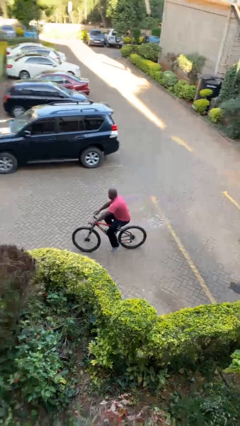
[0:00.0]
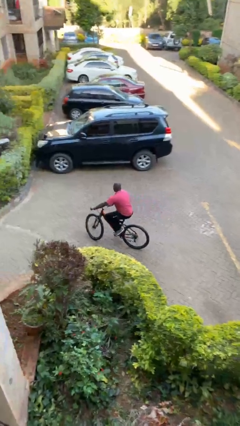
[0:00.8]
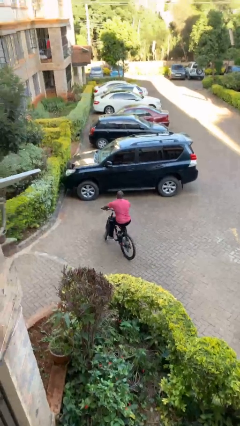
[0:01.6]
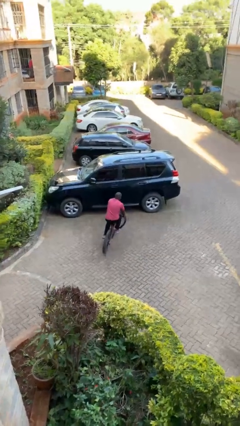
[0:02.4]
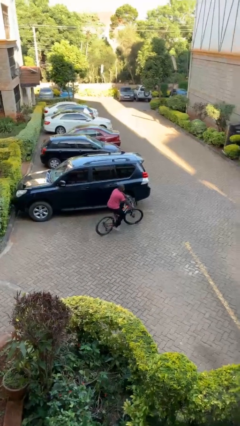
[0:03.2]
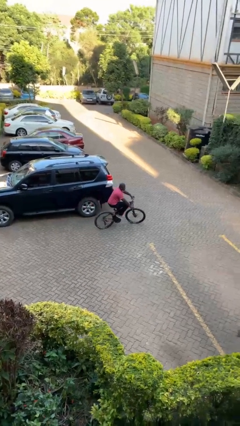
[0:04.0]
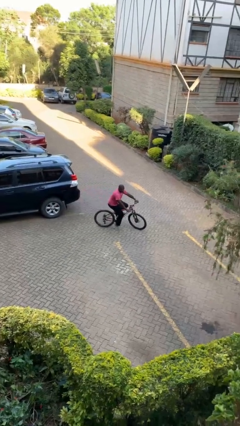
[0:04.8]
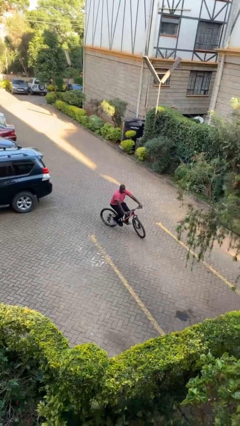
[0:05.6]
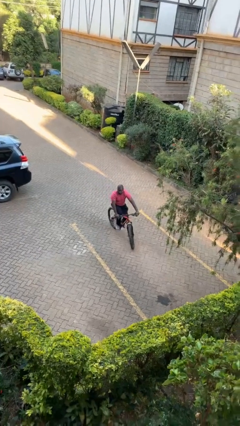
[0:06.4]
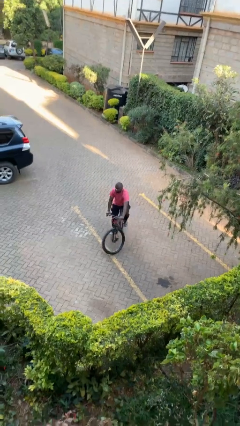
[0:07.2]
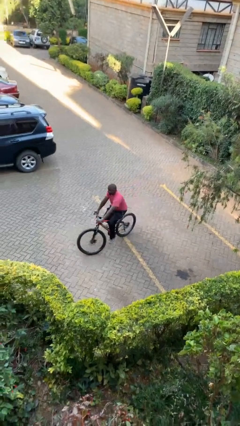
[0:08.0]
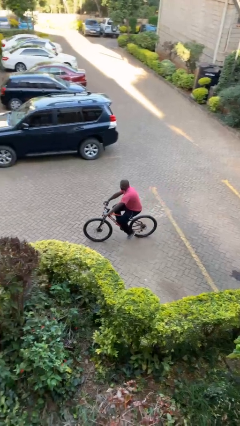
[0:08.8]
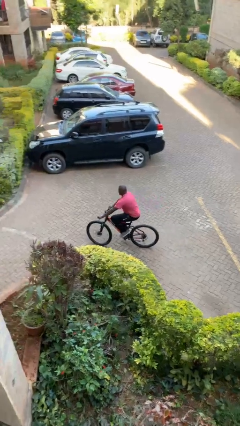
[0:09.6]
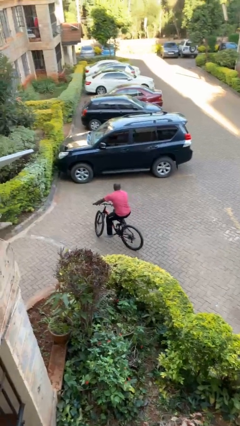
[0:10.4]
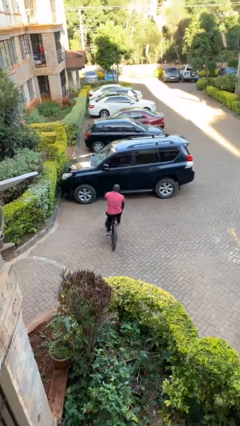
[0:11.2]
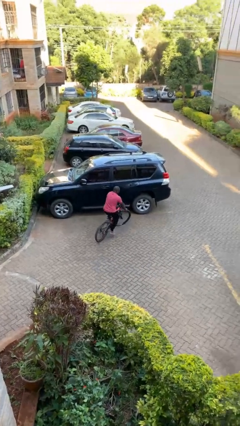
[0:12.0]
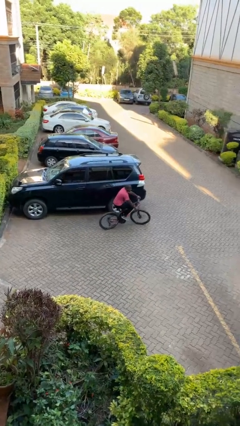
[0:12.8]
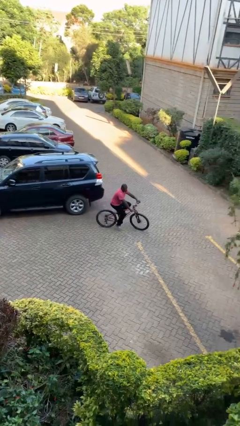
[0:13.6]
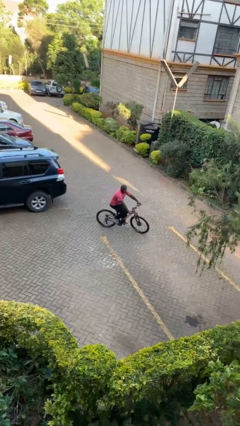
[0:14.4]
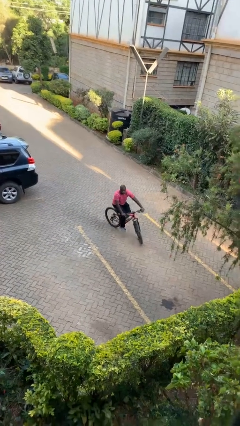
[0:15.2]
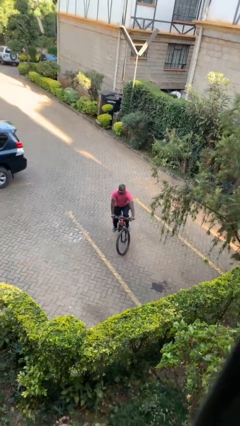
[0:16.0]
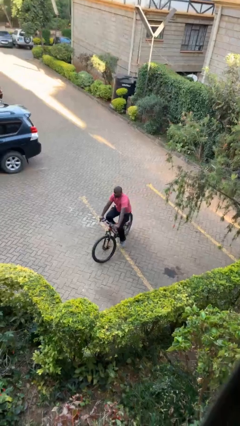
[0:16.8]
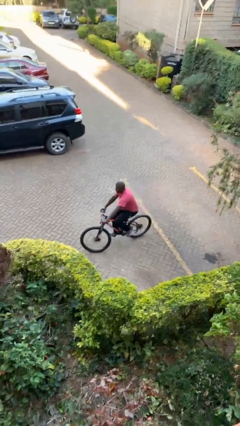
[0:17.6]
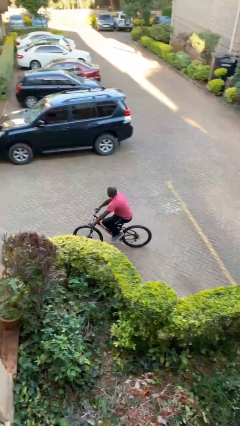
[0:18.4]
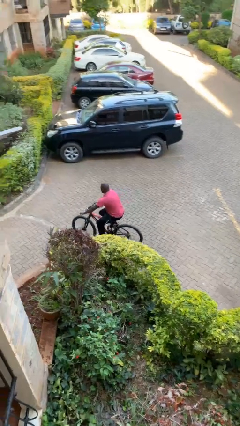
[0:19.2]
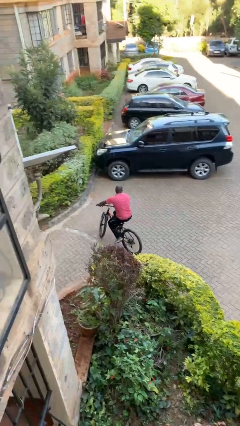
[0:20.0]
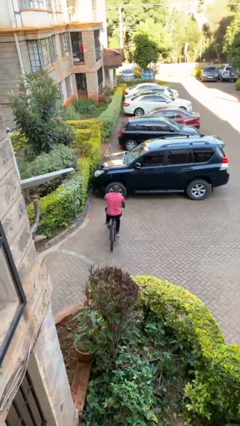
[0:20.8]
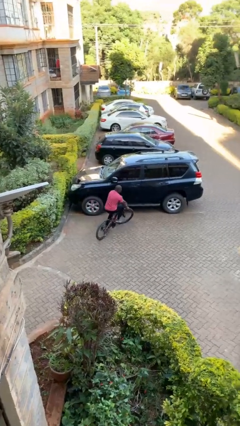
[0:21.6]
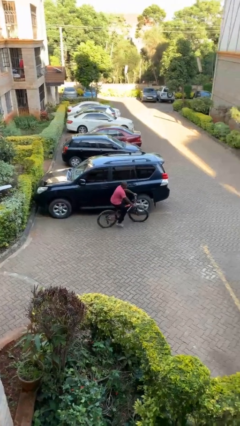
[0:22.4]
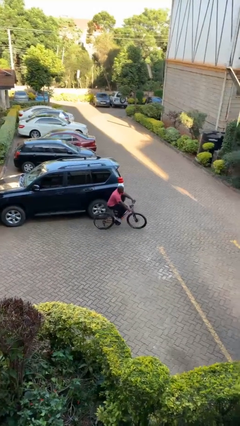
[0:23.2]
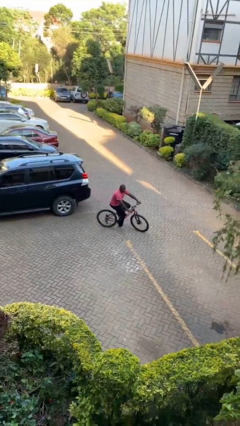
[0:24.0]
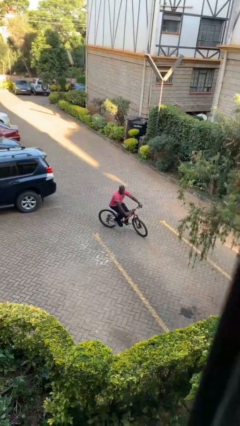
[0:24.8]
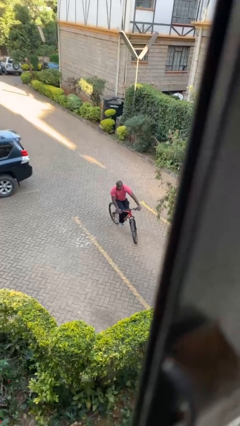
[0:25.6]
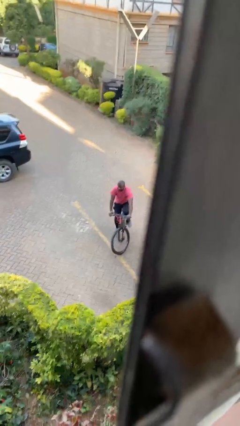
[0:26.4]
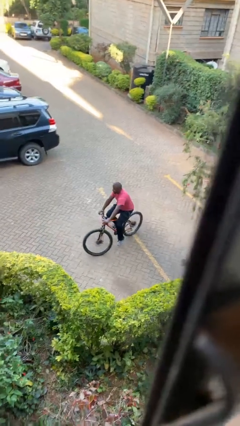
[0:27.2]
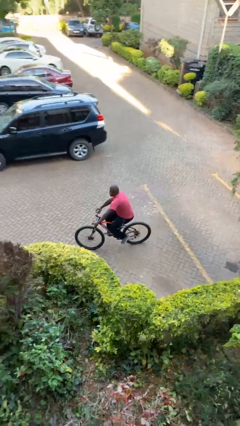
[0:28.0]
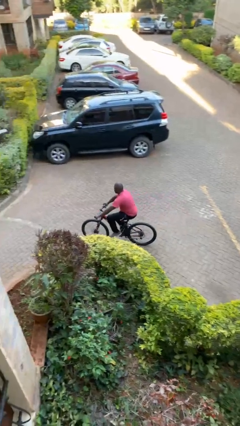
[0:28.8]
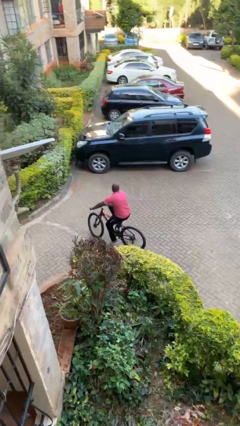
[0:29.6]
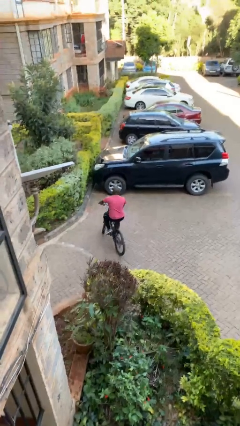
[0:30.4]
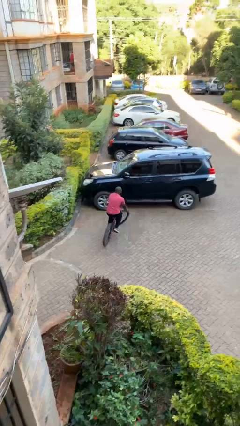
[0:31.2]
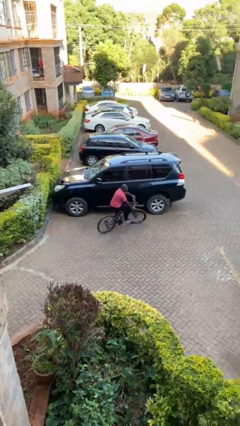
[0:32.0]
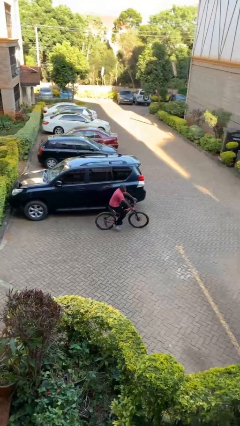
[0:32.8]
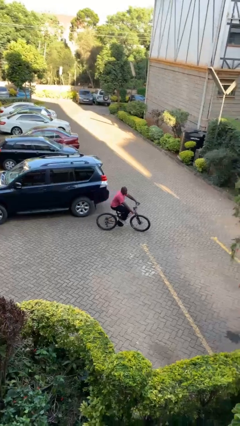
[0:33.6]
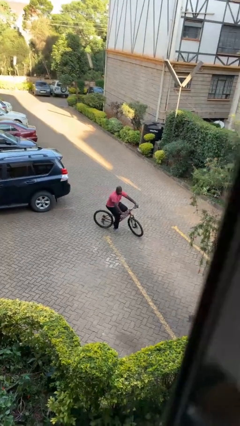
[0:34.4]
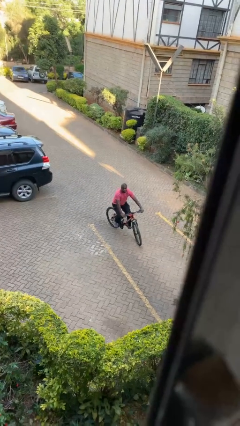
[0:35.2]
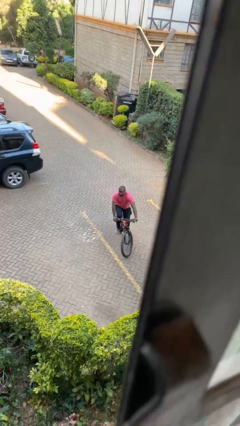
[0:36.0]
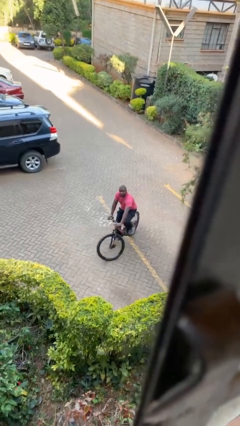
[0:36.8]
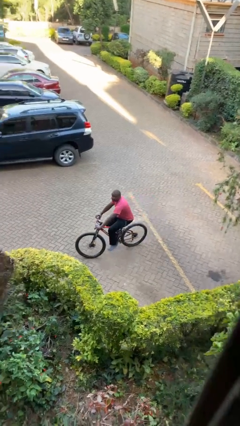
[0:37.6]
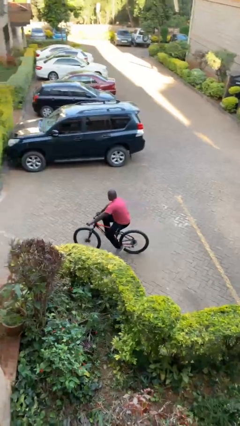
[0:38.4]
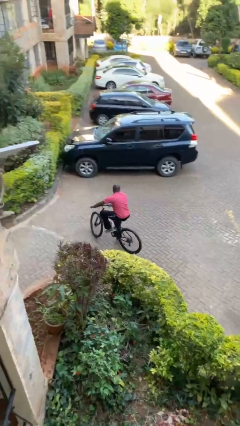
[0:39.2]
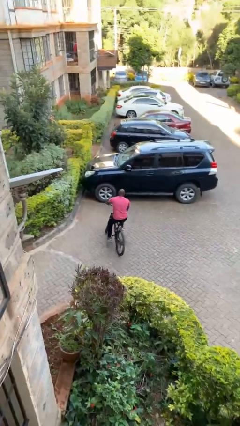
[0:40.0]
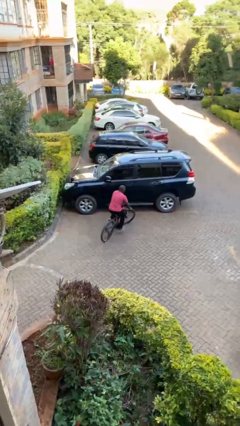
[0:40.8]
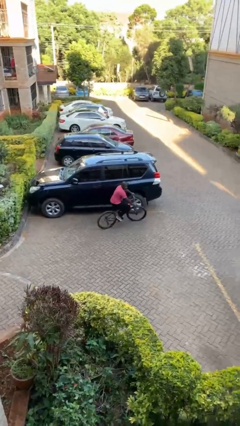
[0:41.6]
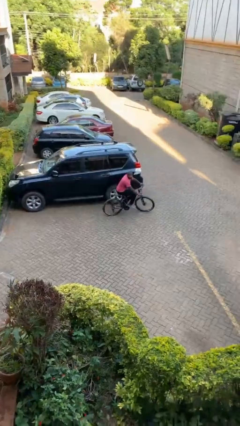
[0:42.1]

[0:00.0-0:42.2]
person rides bicycle

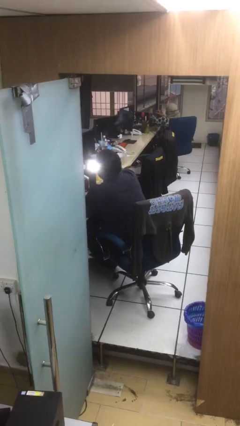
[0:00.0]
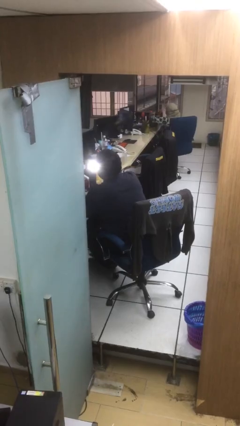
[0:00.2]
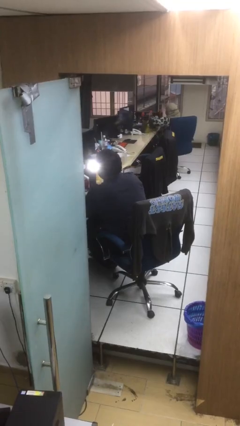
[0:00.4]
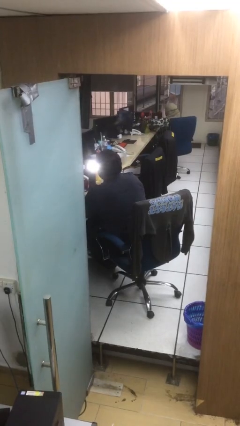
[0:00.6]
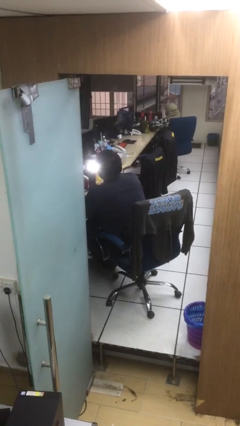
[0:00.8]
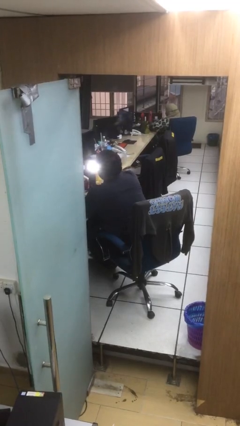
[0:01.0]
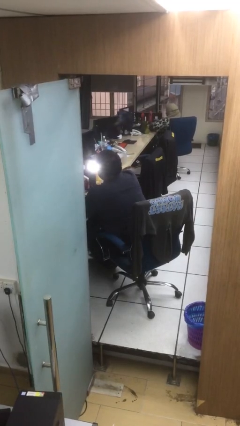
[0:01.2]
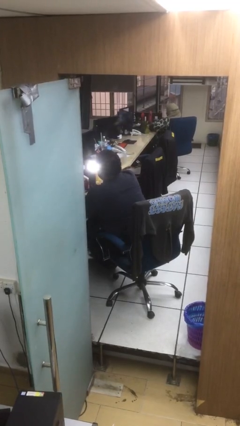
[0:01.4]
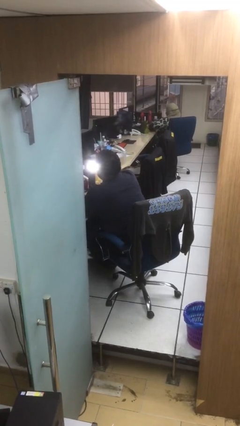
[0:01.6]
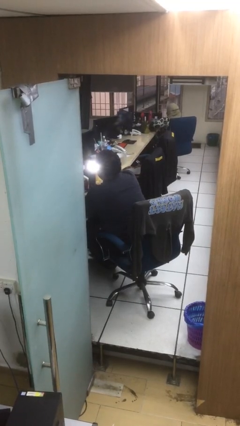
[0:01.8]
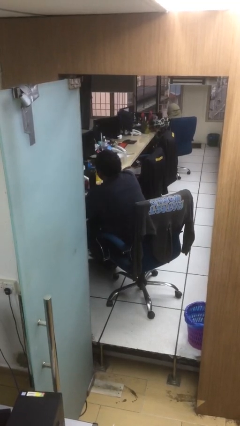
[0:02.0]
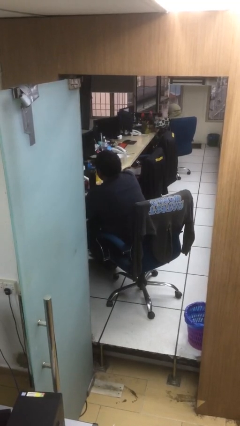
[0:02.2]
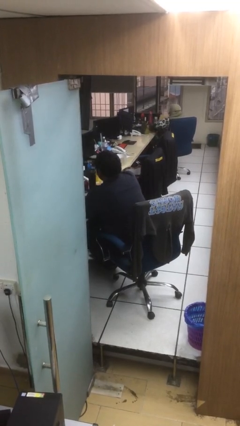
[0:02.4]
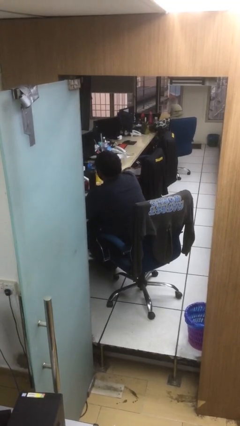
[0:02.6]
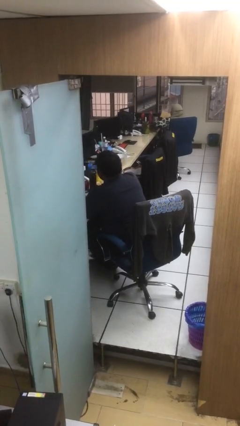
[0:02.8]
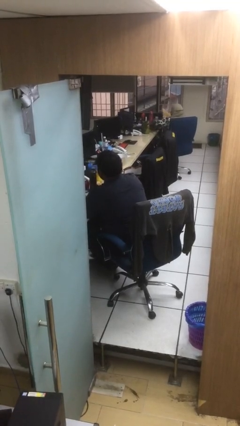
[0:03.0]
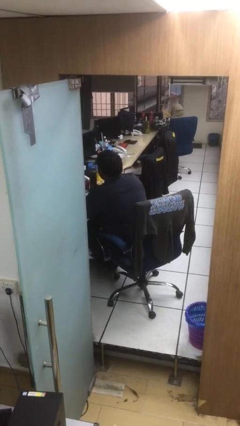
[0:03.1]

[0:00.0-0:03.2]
person turns off lamp

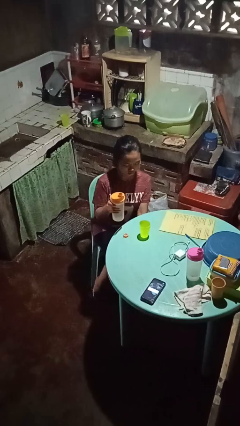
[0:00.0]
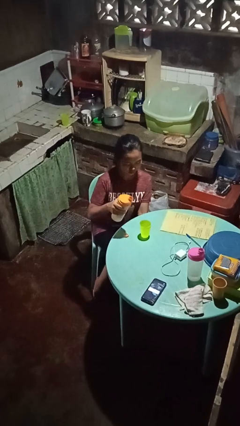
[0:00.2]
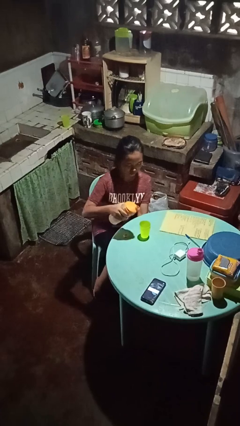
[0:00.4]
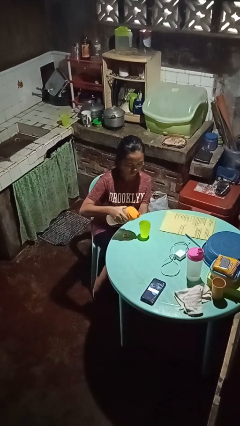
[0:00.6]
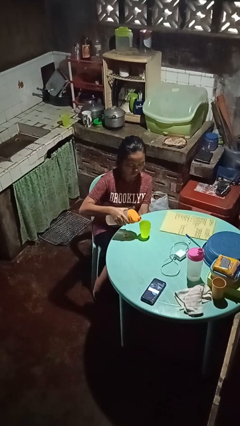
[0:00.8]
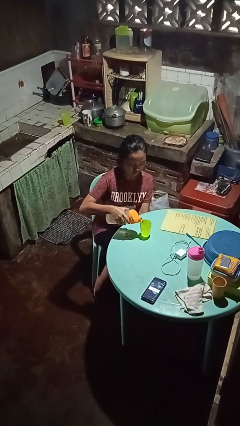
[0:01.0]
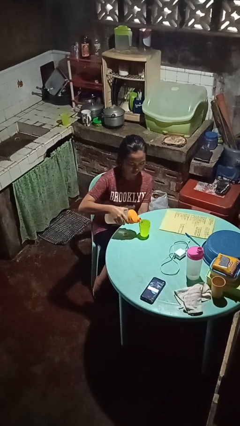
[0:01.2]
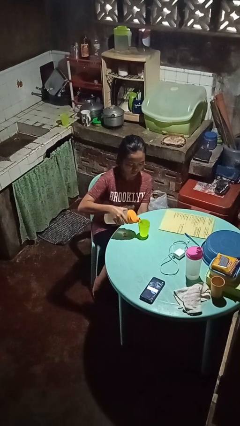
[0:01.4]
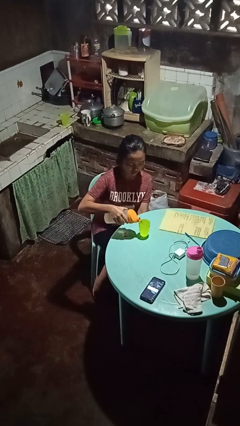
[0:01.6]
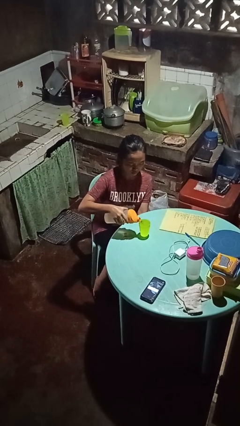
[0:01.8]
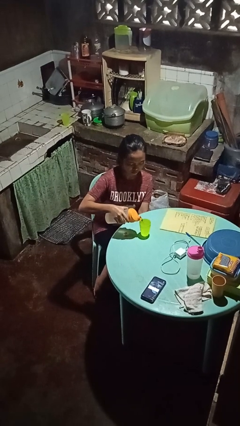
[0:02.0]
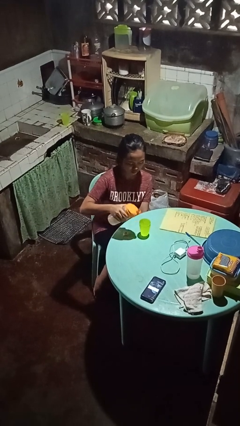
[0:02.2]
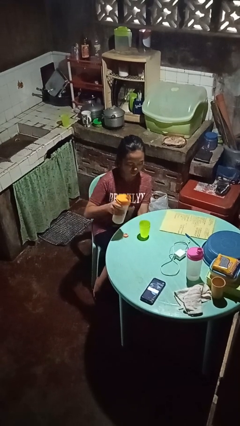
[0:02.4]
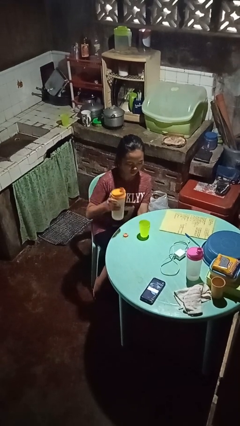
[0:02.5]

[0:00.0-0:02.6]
person pours liquid into cup

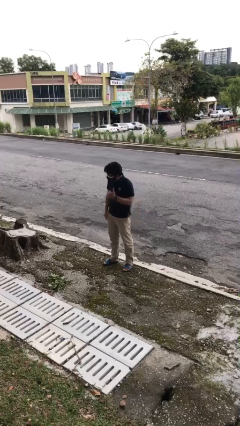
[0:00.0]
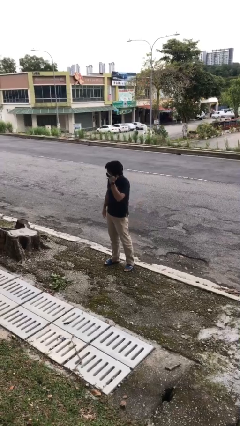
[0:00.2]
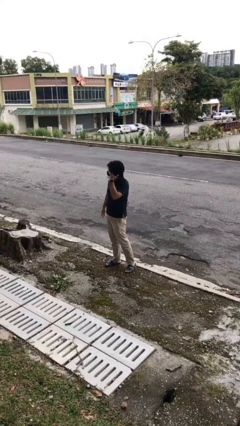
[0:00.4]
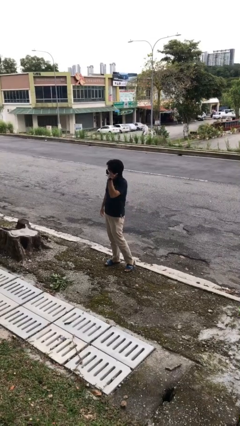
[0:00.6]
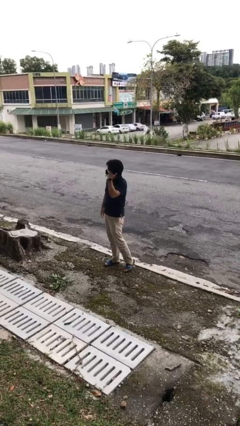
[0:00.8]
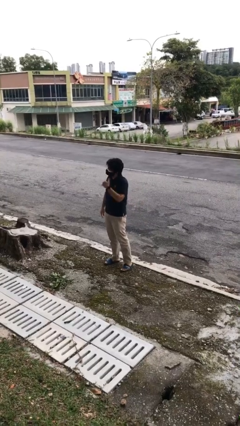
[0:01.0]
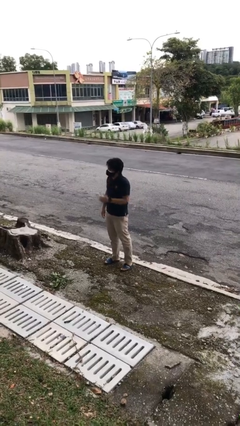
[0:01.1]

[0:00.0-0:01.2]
person gestures call me
